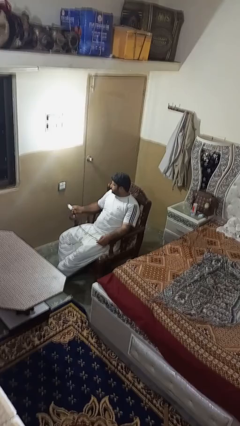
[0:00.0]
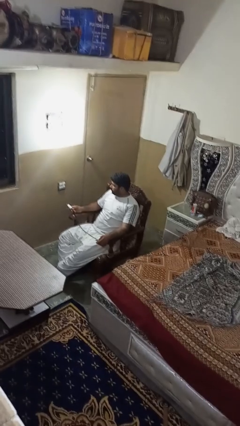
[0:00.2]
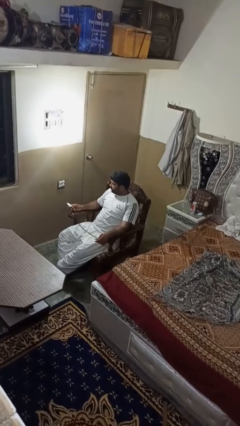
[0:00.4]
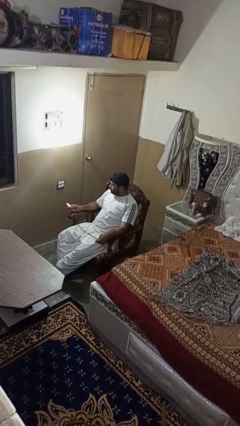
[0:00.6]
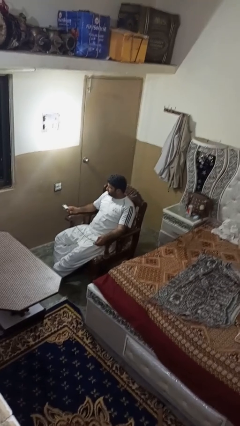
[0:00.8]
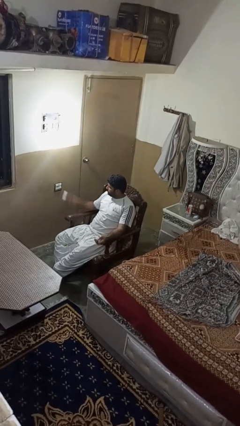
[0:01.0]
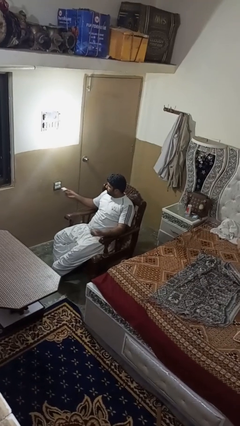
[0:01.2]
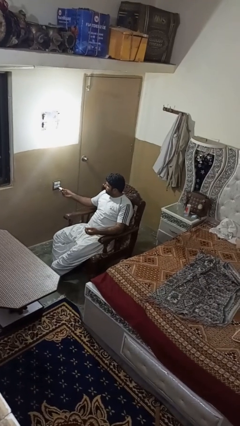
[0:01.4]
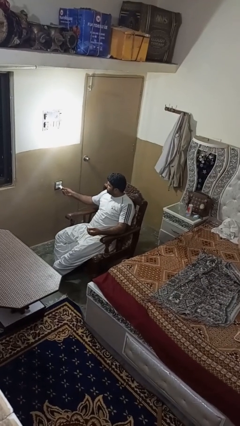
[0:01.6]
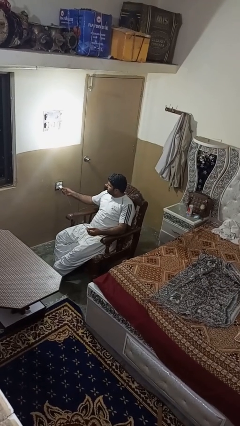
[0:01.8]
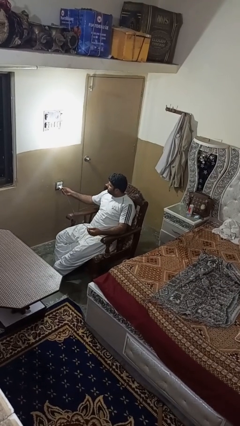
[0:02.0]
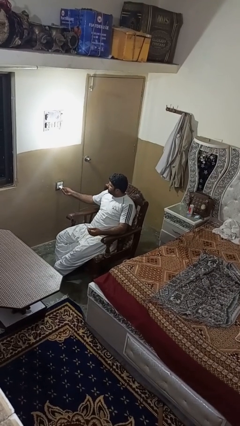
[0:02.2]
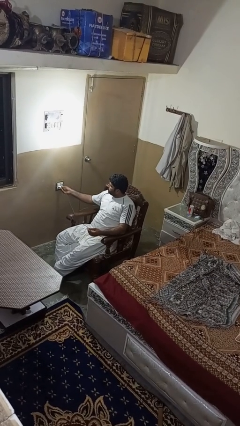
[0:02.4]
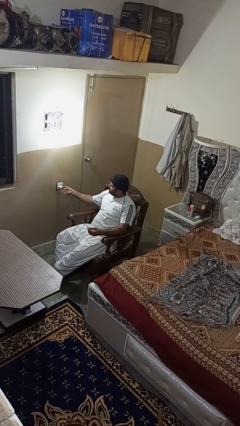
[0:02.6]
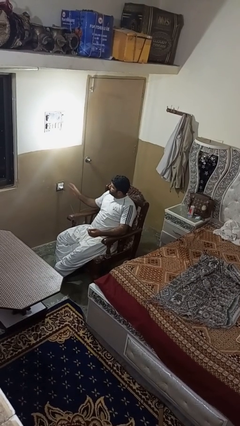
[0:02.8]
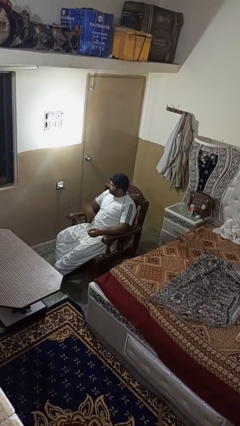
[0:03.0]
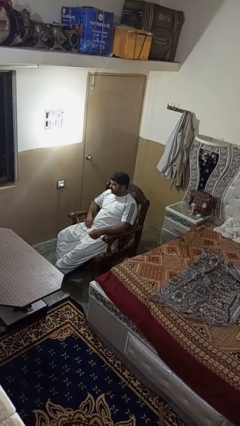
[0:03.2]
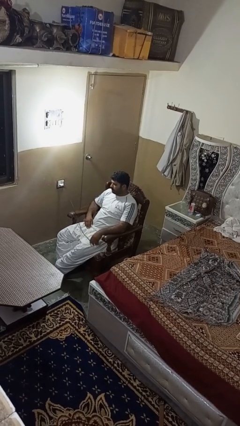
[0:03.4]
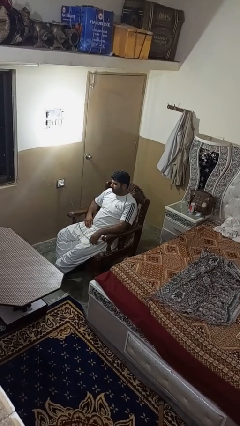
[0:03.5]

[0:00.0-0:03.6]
person plugs into electrical socket

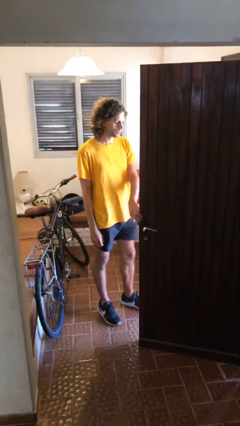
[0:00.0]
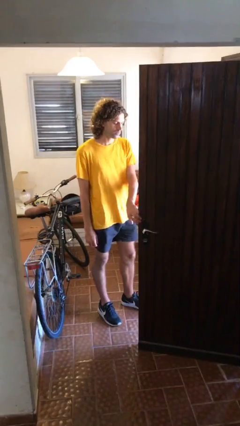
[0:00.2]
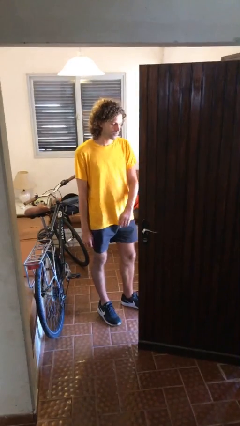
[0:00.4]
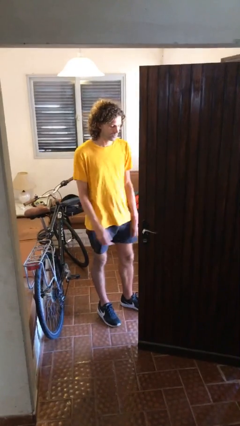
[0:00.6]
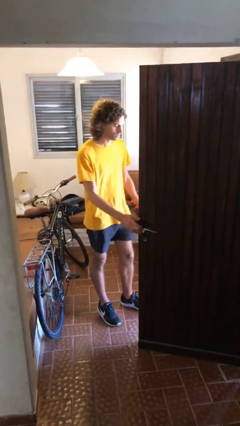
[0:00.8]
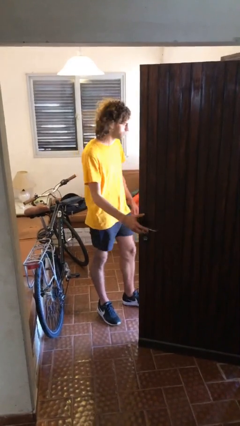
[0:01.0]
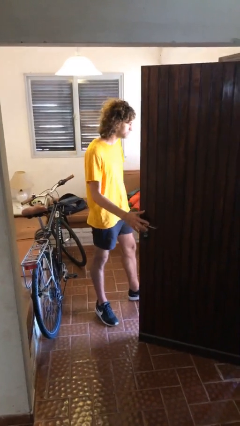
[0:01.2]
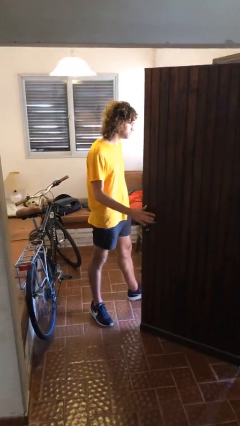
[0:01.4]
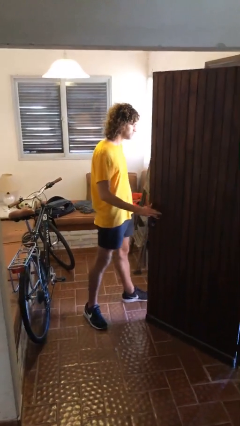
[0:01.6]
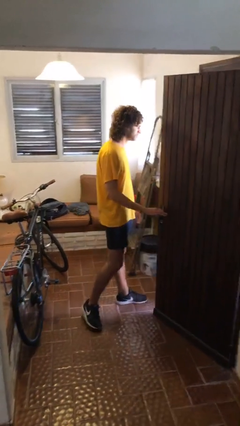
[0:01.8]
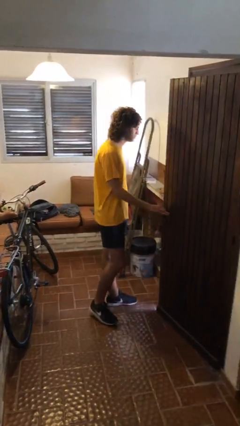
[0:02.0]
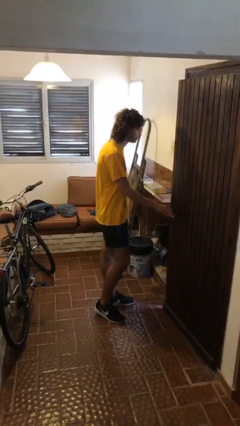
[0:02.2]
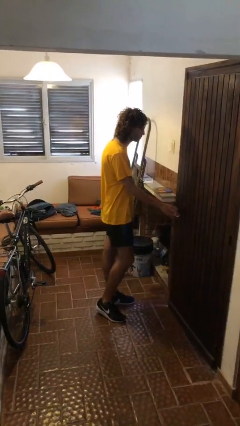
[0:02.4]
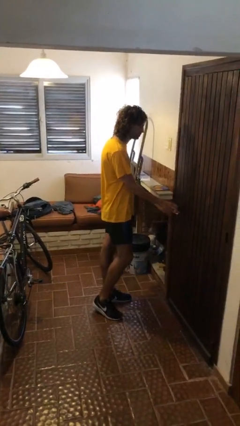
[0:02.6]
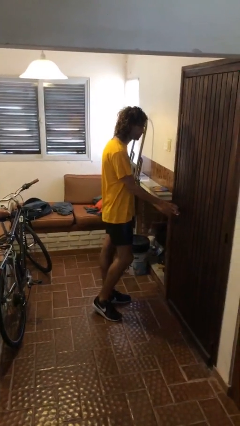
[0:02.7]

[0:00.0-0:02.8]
person closes facility door

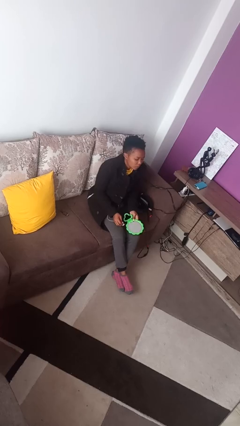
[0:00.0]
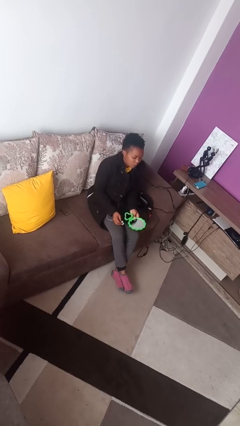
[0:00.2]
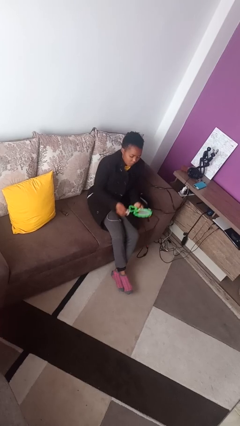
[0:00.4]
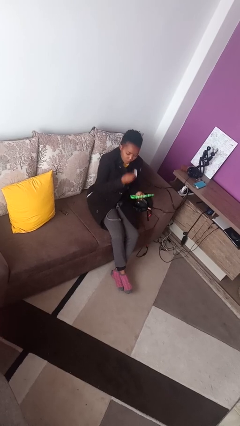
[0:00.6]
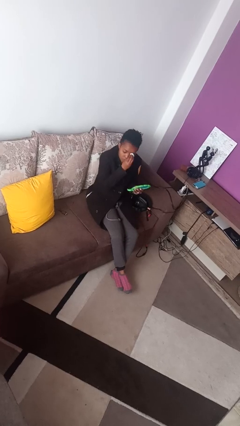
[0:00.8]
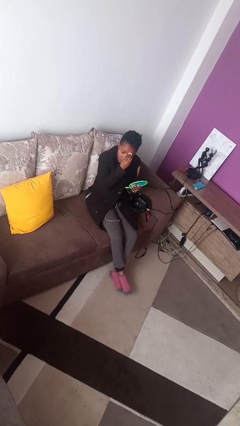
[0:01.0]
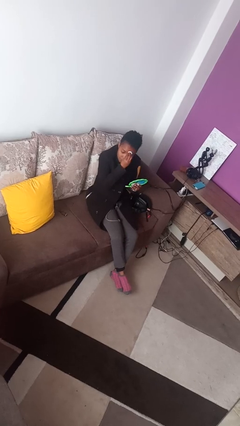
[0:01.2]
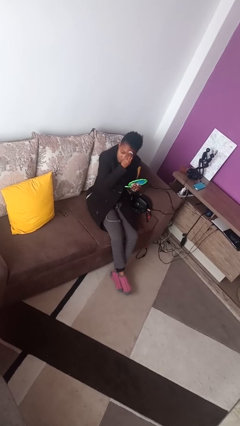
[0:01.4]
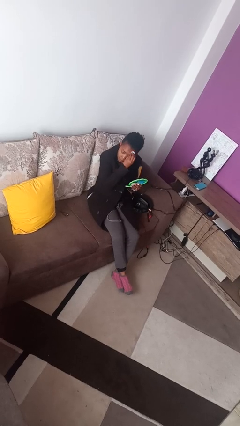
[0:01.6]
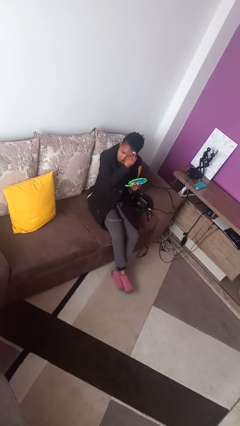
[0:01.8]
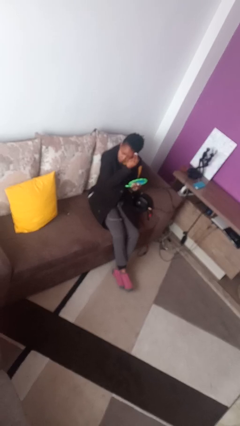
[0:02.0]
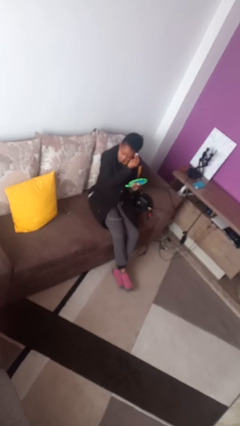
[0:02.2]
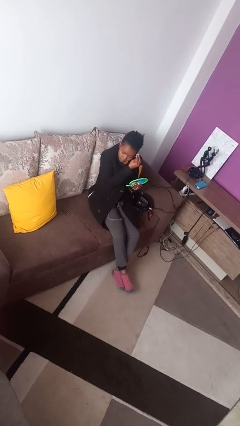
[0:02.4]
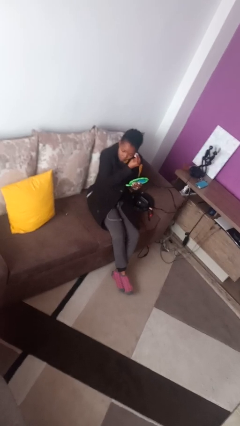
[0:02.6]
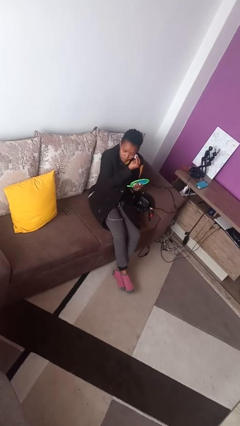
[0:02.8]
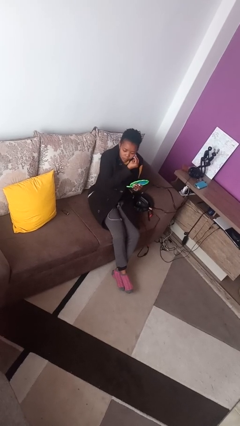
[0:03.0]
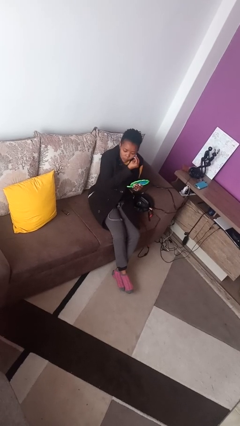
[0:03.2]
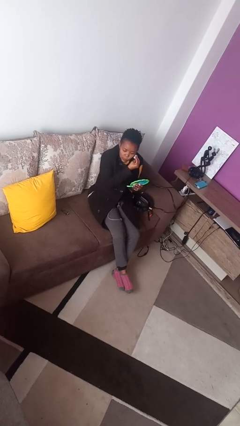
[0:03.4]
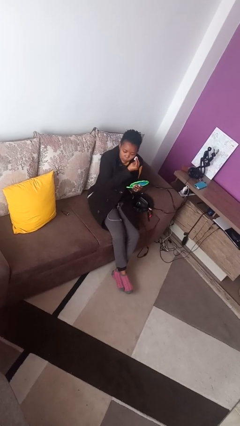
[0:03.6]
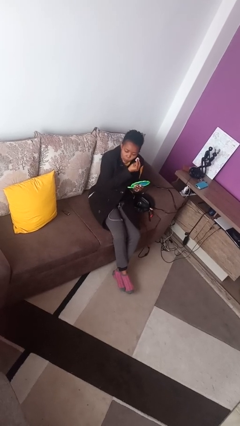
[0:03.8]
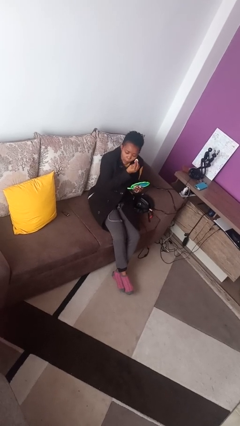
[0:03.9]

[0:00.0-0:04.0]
person applies foundation makeup

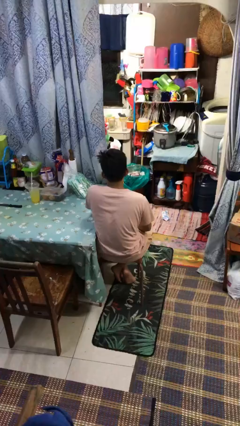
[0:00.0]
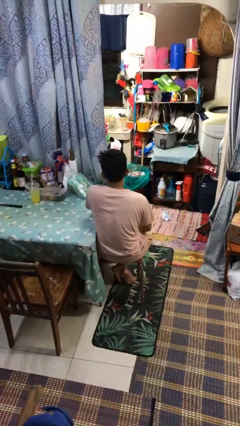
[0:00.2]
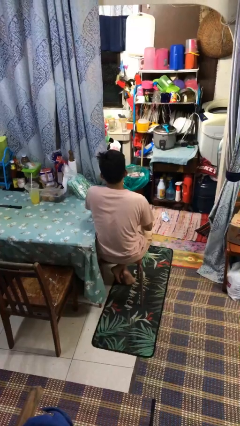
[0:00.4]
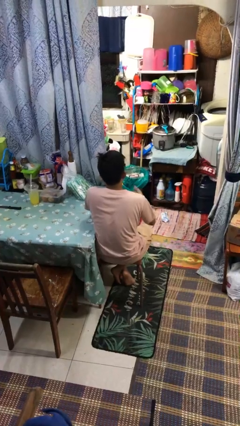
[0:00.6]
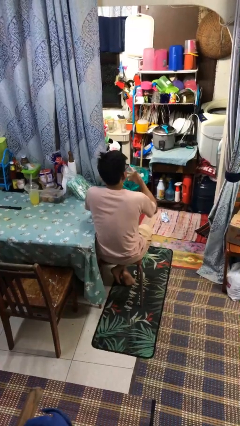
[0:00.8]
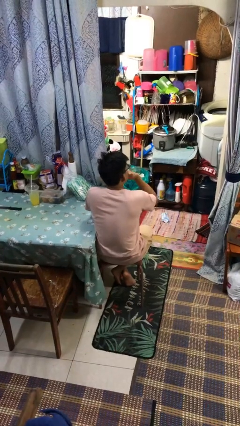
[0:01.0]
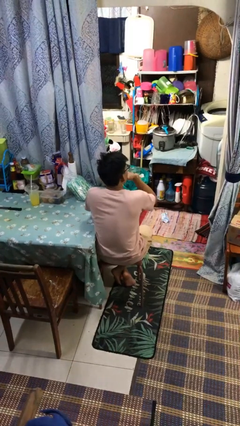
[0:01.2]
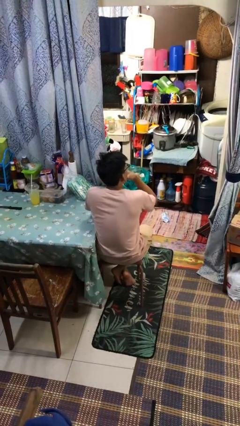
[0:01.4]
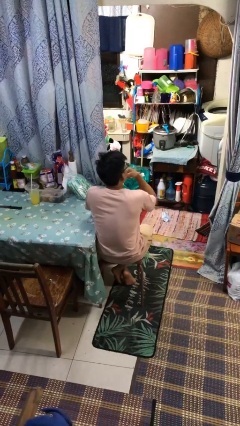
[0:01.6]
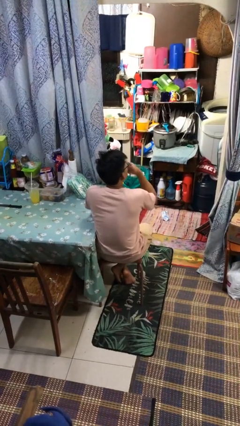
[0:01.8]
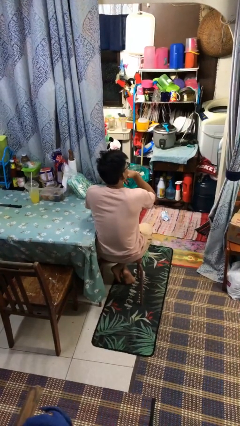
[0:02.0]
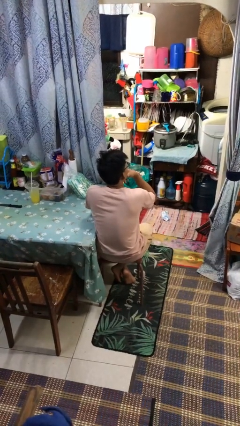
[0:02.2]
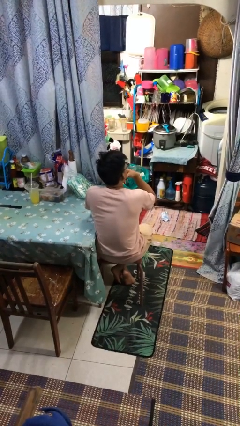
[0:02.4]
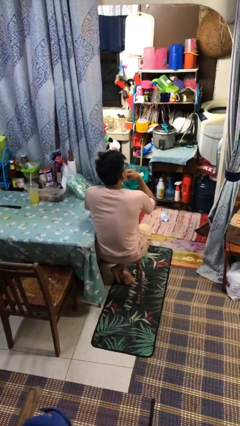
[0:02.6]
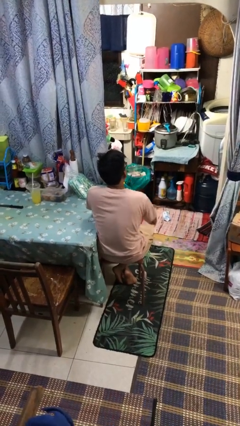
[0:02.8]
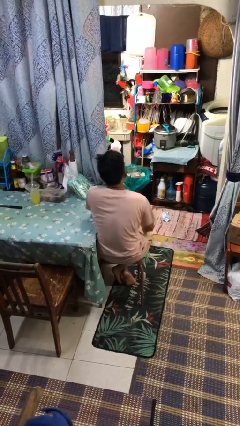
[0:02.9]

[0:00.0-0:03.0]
person strokes chin

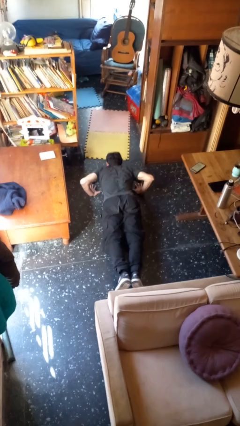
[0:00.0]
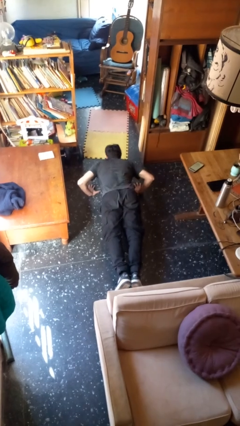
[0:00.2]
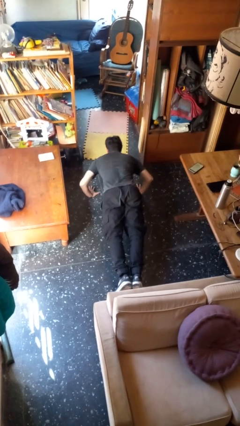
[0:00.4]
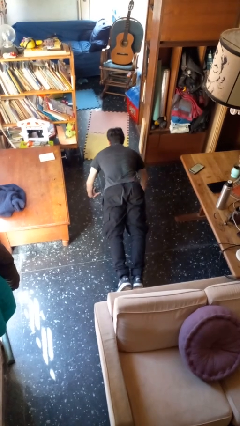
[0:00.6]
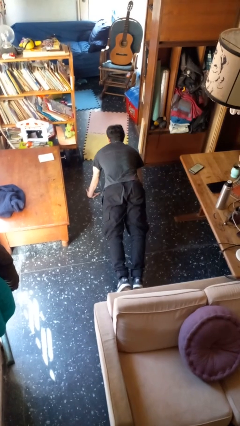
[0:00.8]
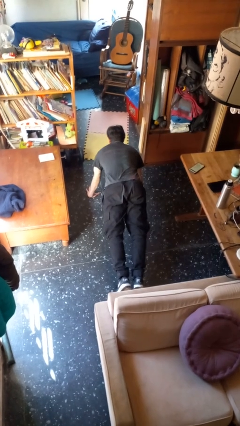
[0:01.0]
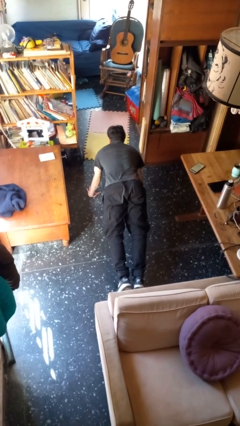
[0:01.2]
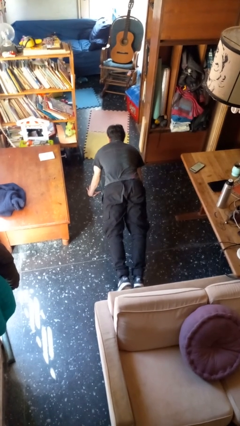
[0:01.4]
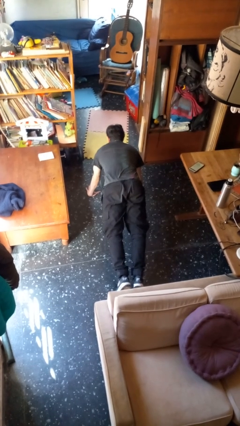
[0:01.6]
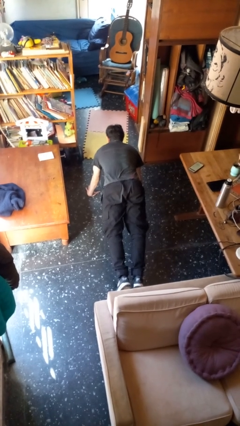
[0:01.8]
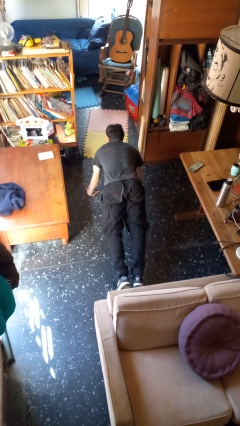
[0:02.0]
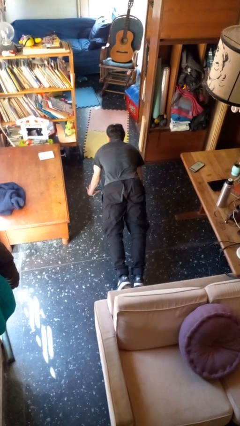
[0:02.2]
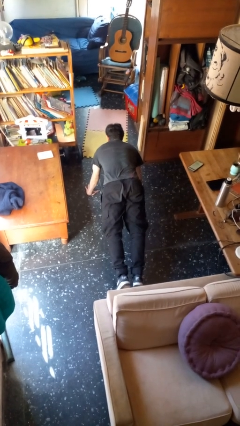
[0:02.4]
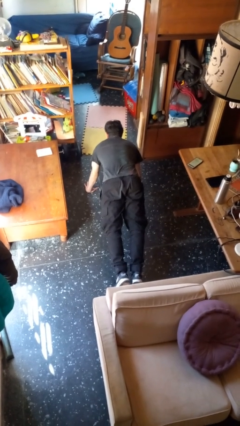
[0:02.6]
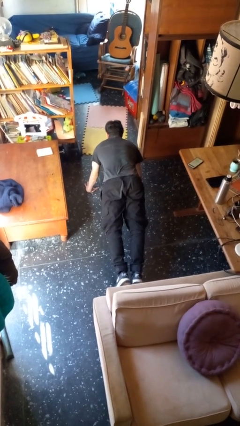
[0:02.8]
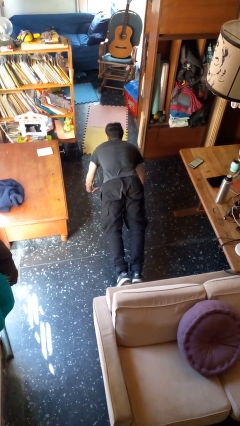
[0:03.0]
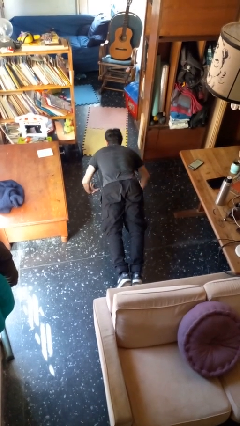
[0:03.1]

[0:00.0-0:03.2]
person exercises with pushup

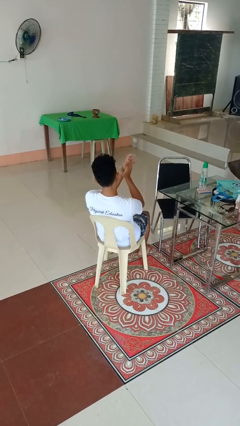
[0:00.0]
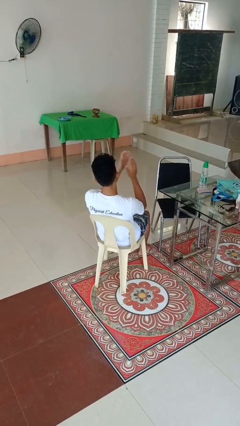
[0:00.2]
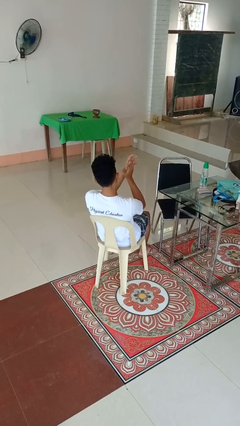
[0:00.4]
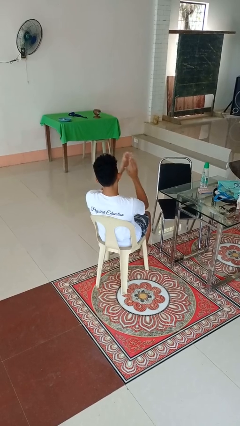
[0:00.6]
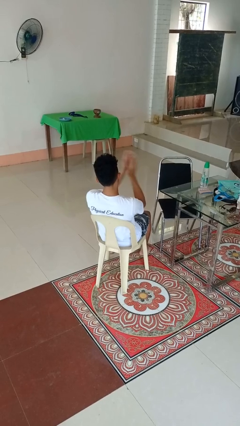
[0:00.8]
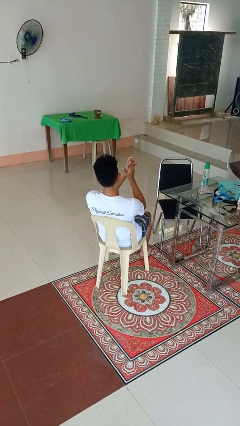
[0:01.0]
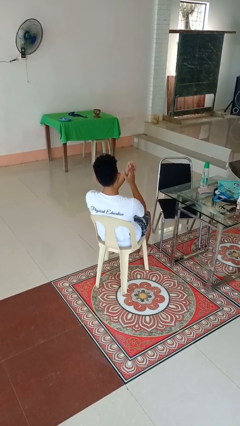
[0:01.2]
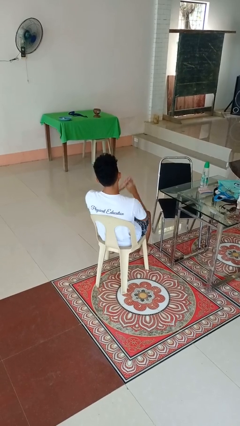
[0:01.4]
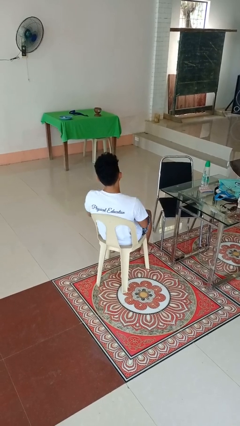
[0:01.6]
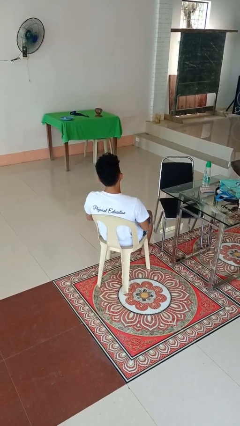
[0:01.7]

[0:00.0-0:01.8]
person claps hands
